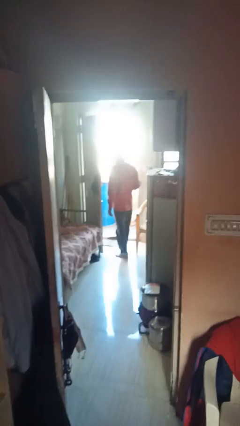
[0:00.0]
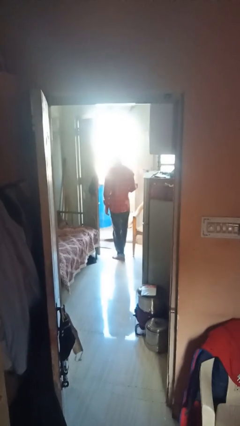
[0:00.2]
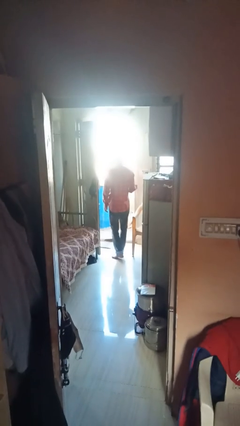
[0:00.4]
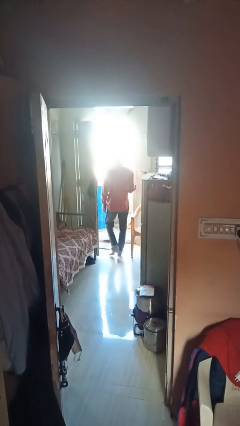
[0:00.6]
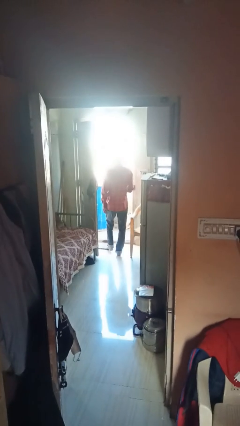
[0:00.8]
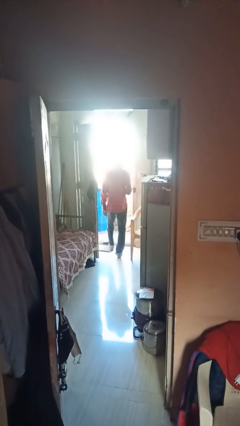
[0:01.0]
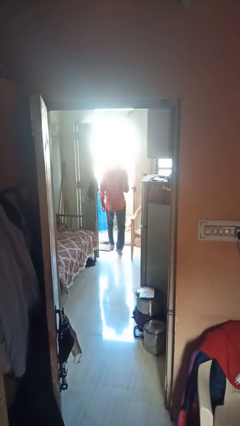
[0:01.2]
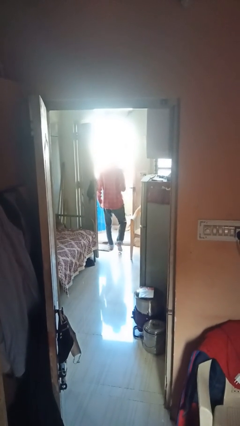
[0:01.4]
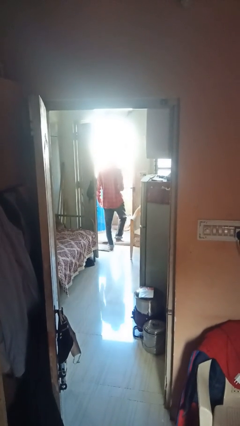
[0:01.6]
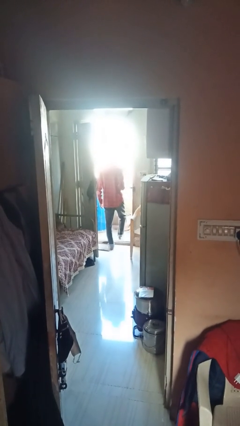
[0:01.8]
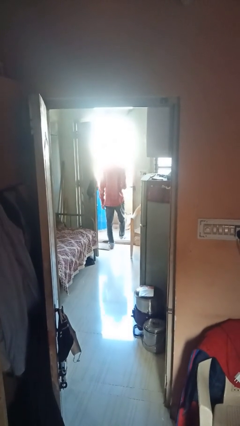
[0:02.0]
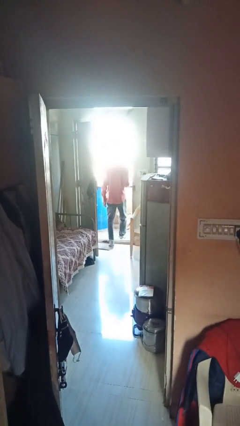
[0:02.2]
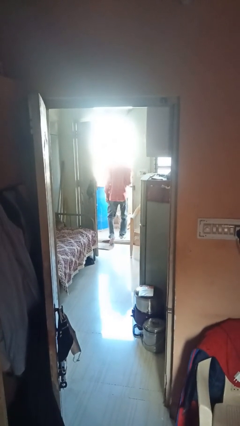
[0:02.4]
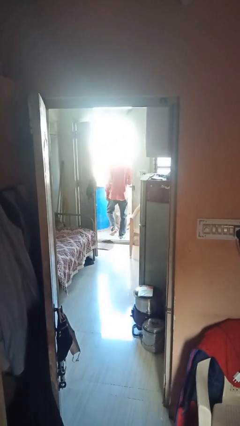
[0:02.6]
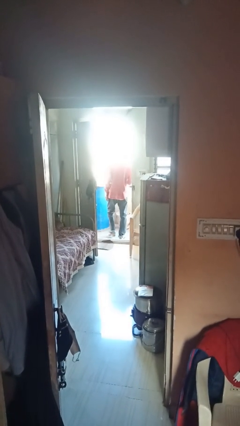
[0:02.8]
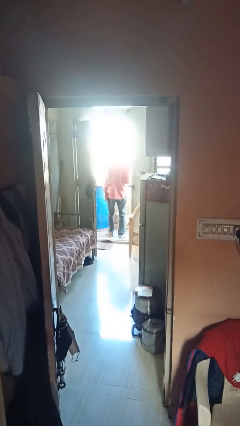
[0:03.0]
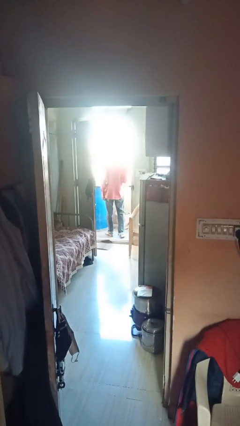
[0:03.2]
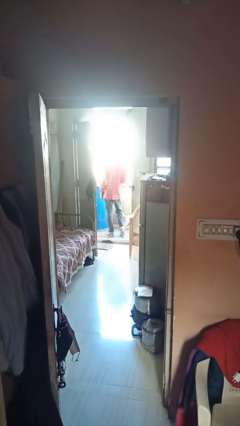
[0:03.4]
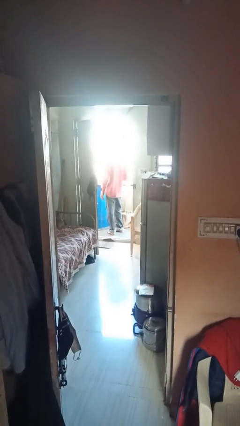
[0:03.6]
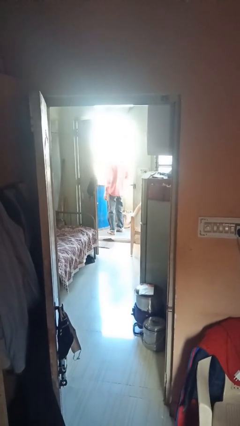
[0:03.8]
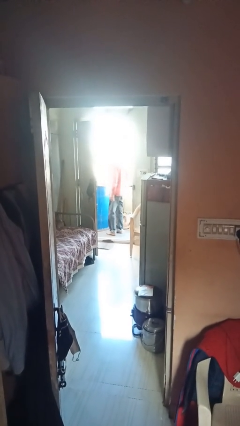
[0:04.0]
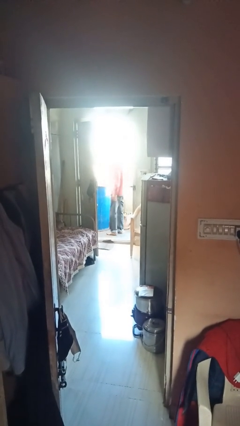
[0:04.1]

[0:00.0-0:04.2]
person exits scene through structure

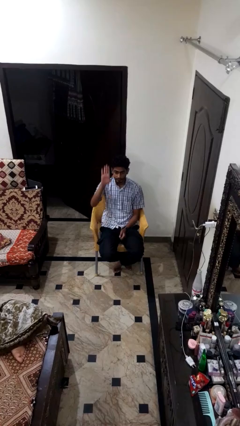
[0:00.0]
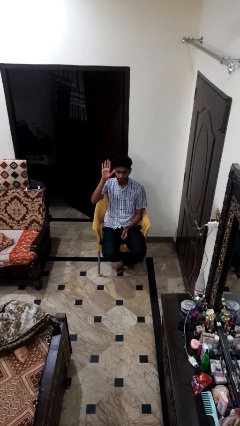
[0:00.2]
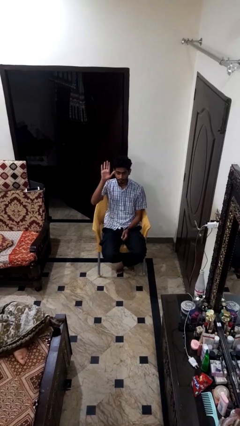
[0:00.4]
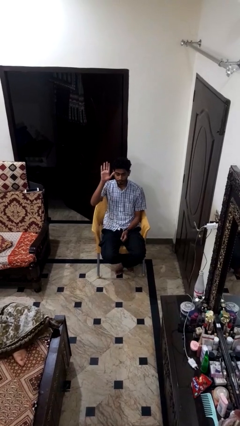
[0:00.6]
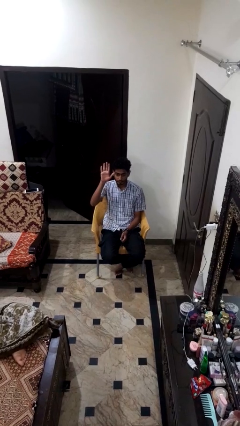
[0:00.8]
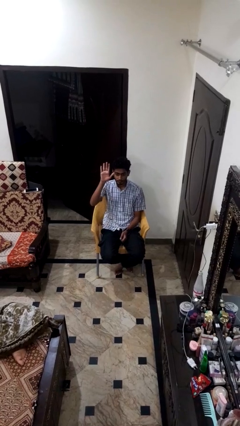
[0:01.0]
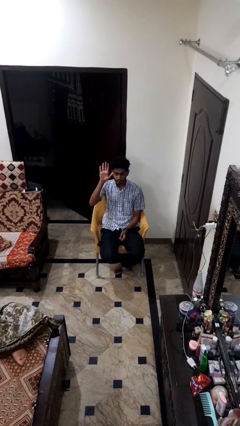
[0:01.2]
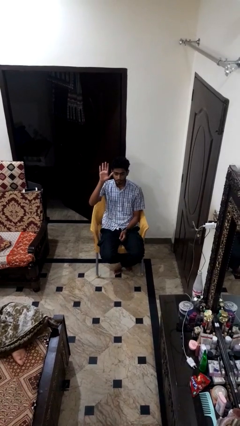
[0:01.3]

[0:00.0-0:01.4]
person gestures raise hand

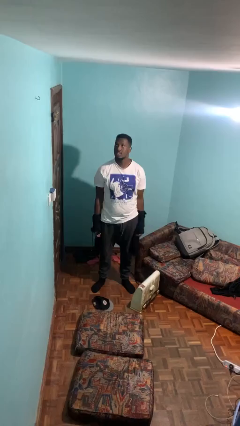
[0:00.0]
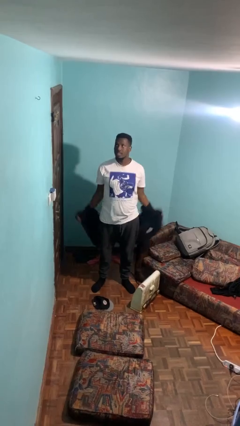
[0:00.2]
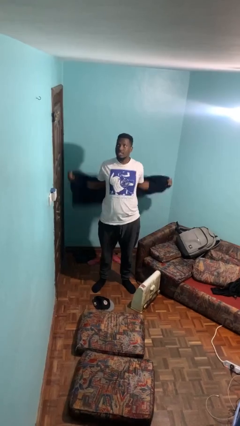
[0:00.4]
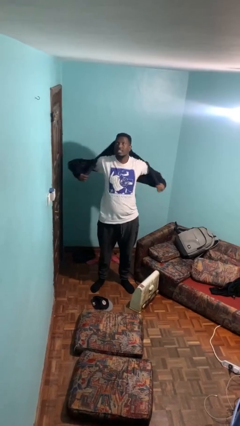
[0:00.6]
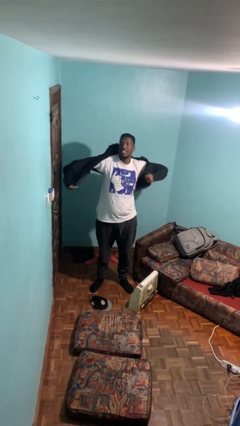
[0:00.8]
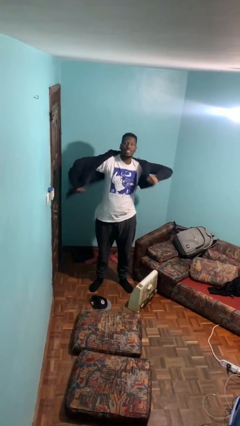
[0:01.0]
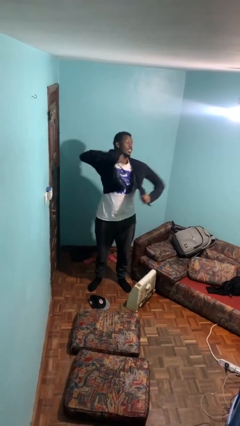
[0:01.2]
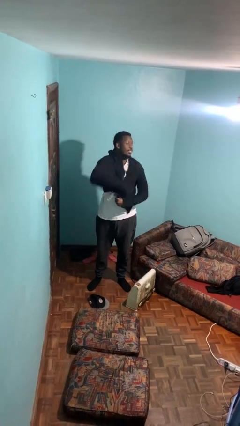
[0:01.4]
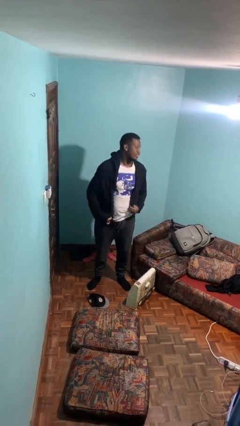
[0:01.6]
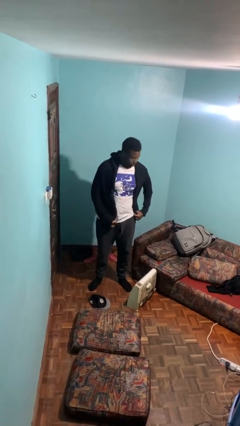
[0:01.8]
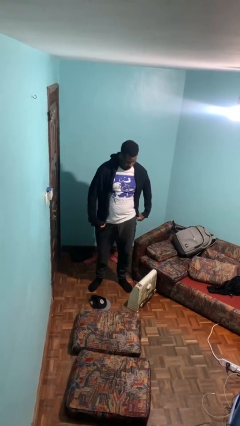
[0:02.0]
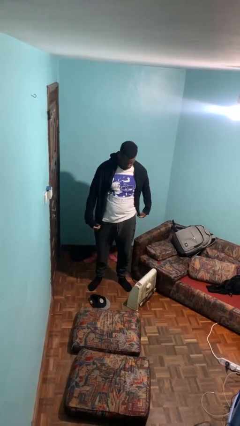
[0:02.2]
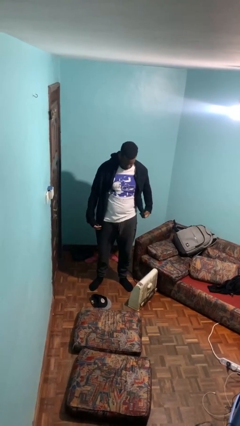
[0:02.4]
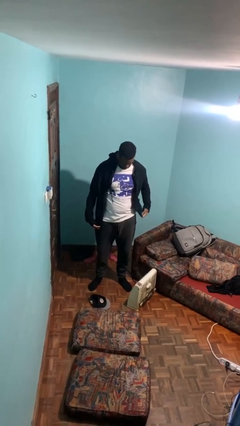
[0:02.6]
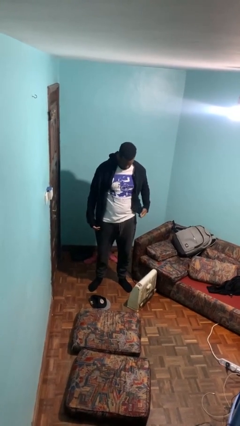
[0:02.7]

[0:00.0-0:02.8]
person puts on jacket

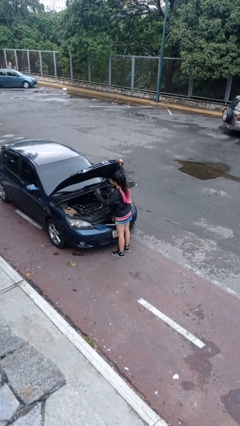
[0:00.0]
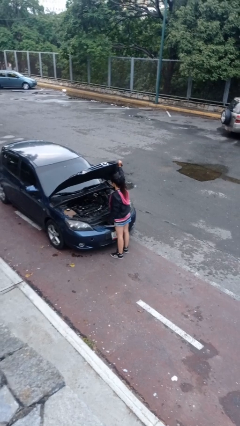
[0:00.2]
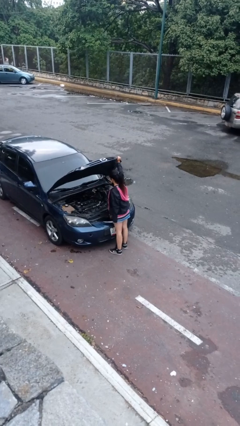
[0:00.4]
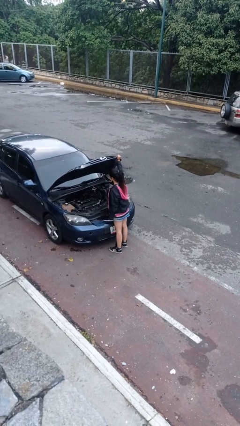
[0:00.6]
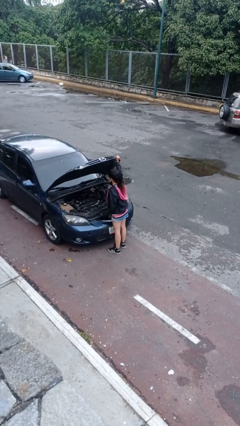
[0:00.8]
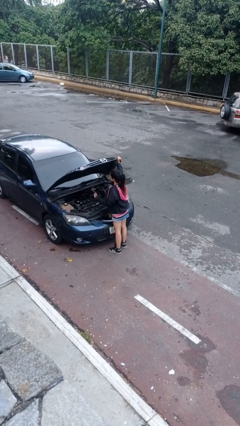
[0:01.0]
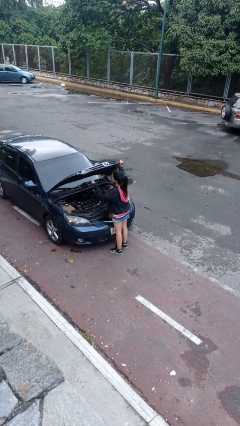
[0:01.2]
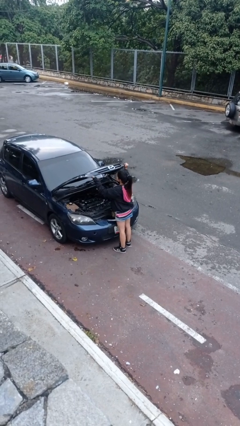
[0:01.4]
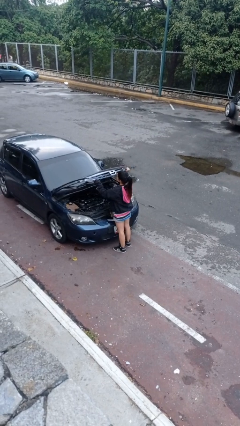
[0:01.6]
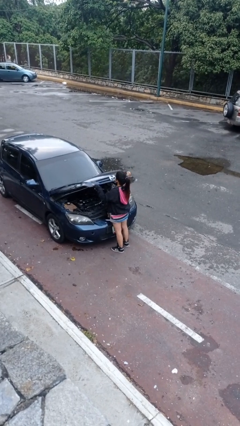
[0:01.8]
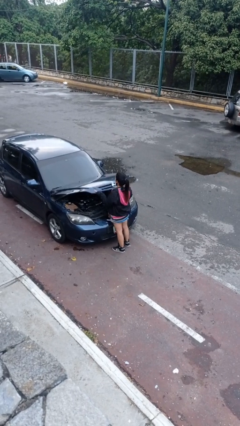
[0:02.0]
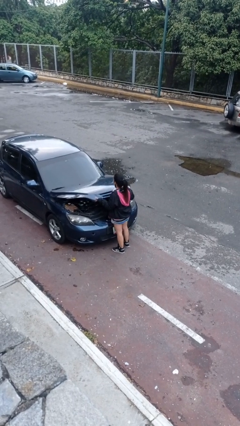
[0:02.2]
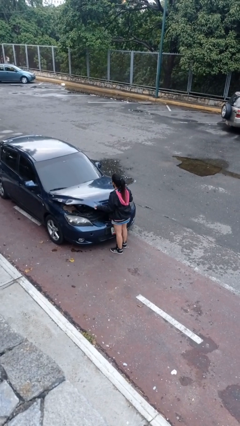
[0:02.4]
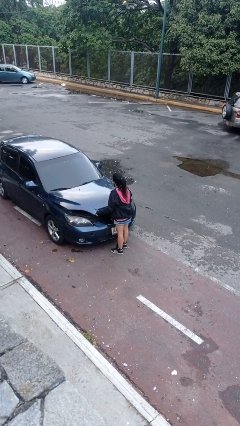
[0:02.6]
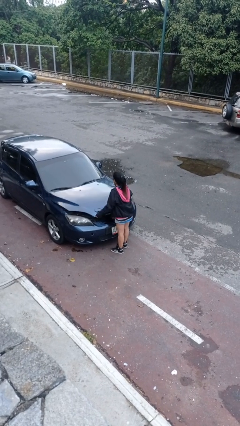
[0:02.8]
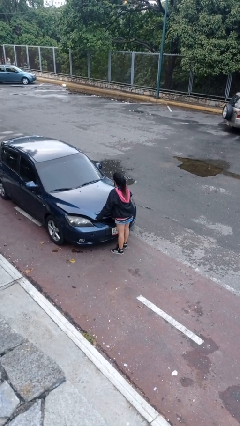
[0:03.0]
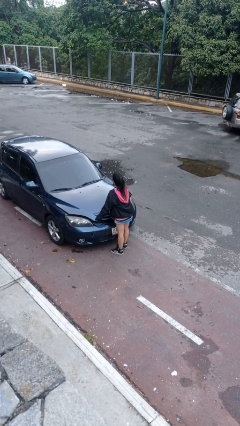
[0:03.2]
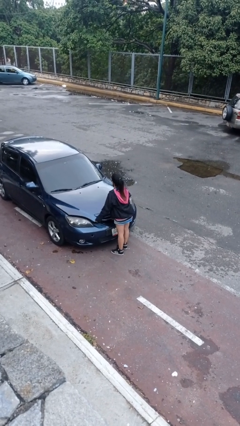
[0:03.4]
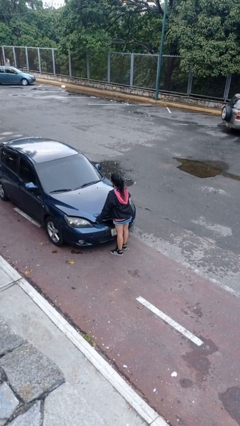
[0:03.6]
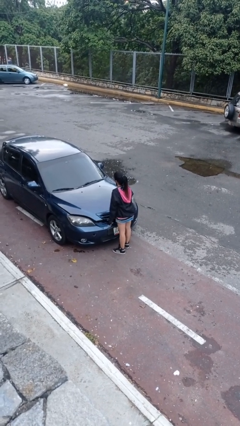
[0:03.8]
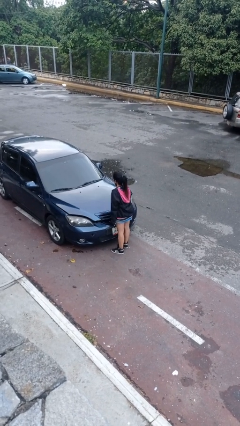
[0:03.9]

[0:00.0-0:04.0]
person closes car hood

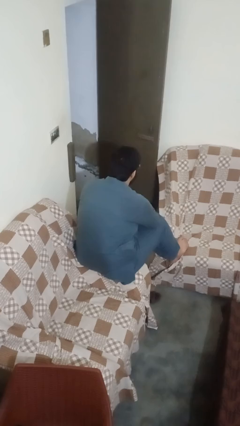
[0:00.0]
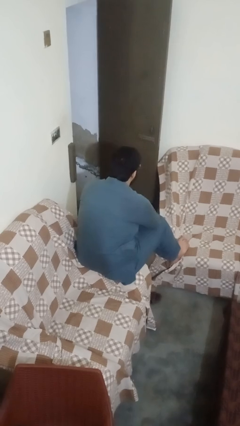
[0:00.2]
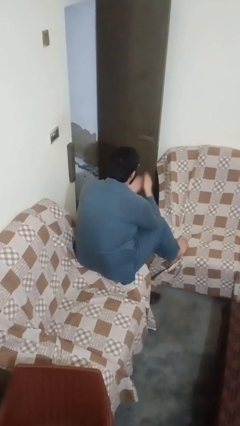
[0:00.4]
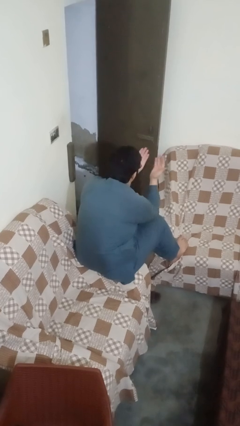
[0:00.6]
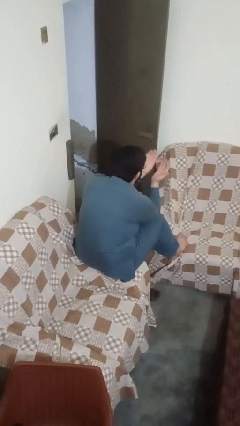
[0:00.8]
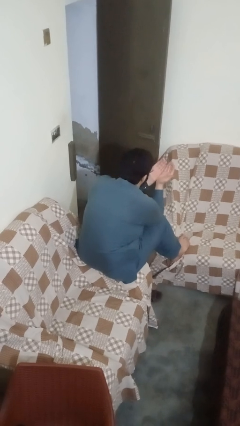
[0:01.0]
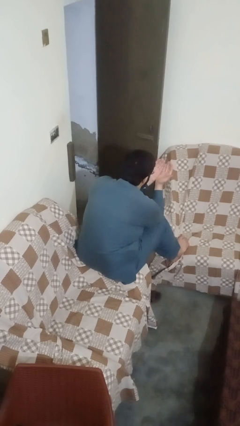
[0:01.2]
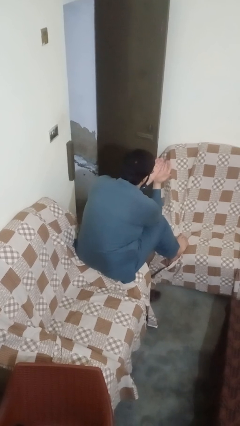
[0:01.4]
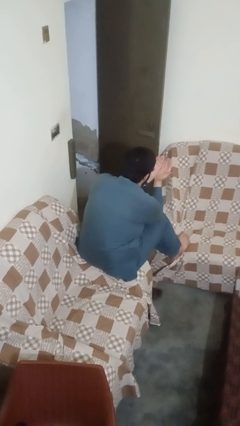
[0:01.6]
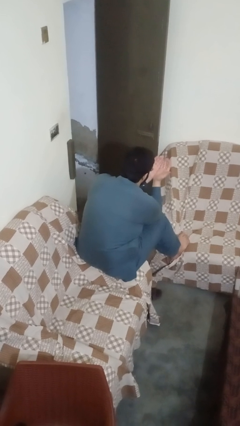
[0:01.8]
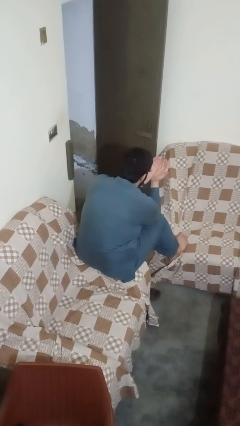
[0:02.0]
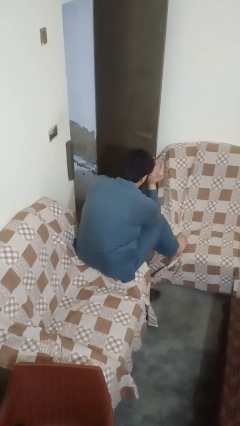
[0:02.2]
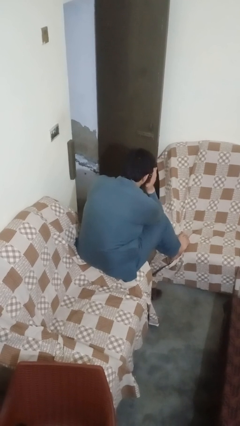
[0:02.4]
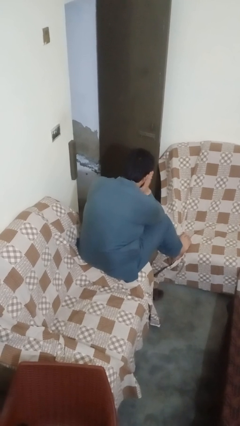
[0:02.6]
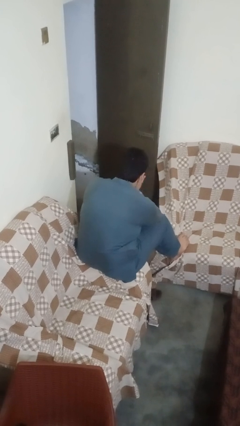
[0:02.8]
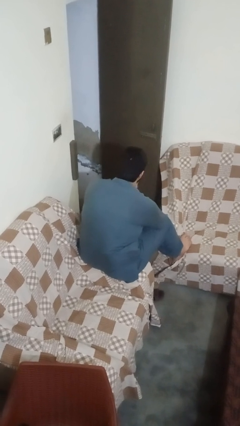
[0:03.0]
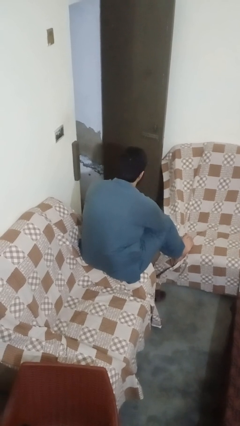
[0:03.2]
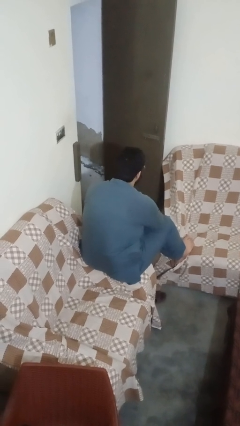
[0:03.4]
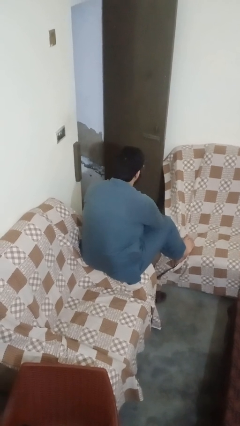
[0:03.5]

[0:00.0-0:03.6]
person prays

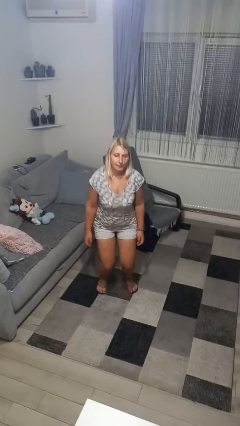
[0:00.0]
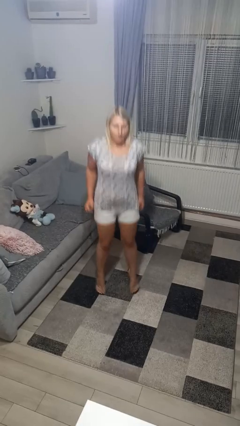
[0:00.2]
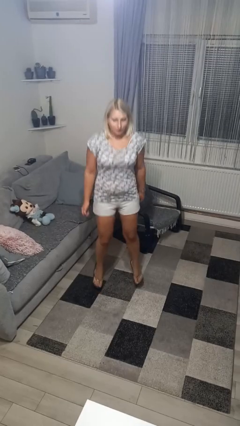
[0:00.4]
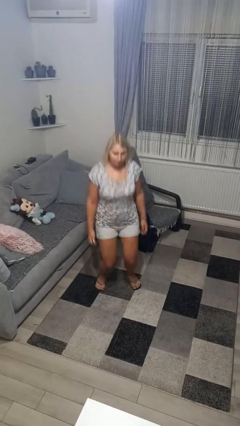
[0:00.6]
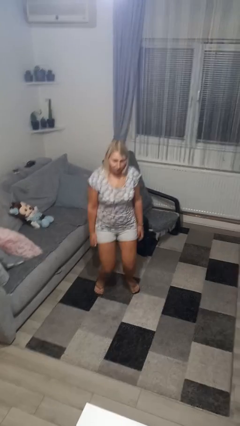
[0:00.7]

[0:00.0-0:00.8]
person jumps

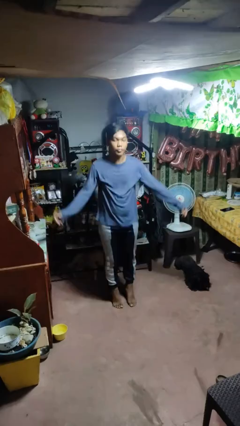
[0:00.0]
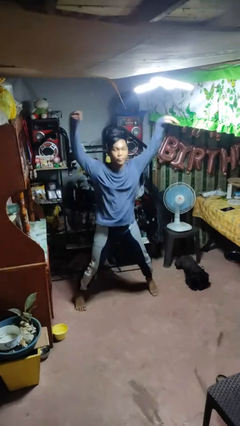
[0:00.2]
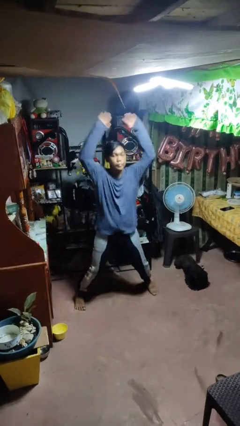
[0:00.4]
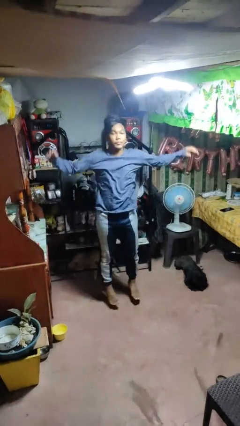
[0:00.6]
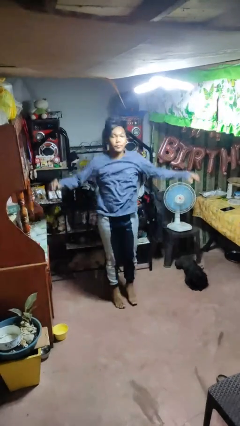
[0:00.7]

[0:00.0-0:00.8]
person exercises with jumping jacks
